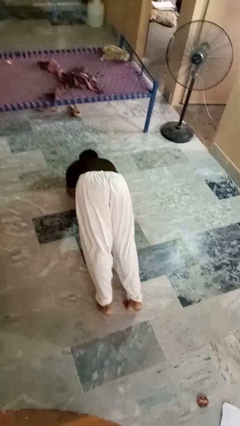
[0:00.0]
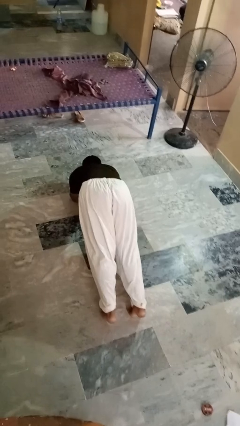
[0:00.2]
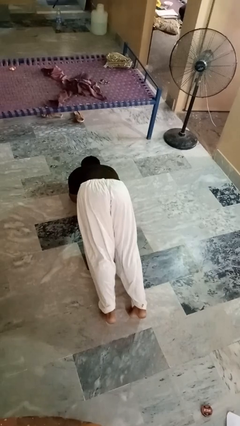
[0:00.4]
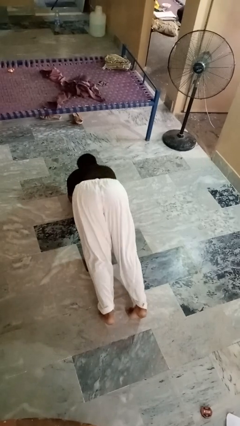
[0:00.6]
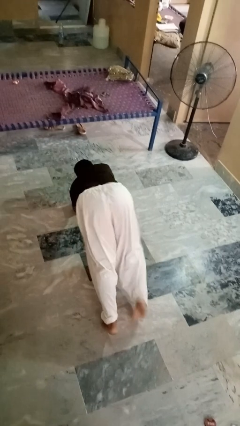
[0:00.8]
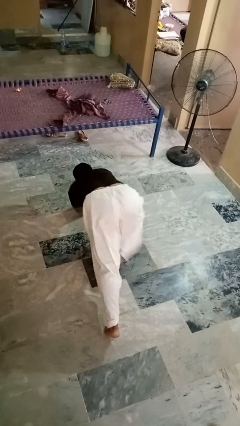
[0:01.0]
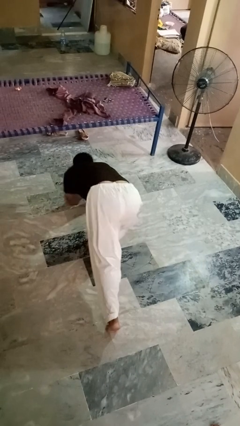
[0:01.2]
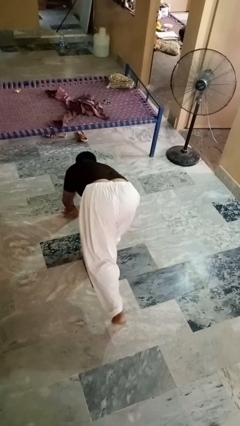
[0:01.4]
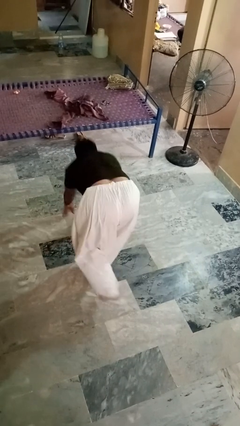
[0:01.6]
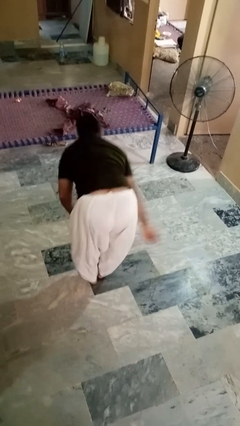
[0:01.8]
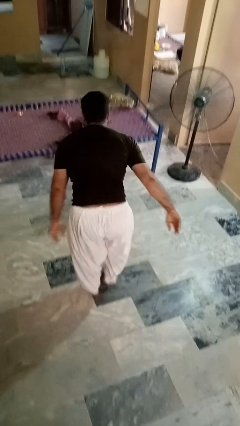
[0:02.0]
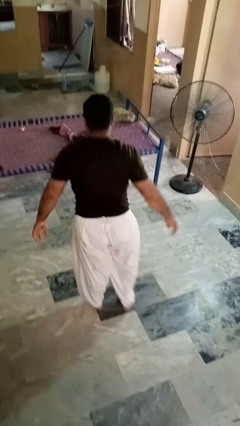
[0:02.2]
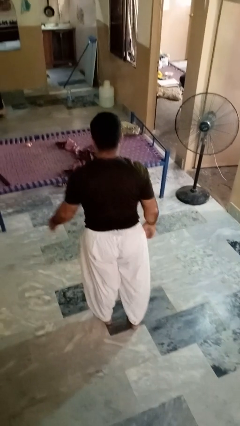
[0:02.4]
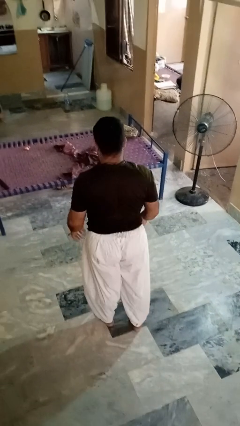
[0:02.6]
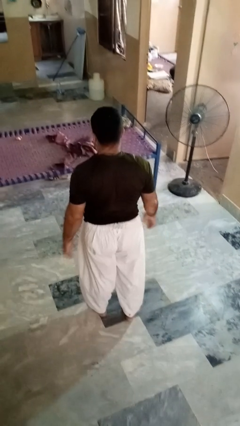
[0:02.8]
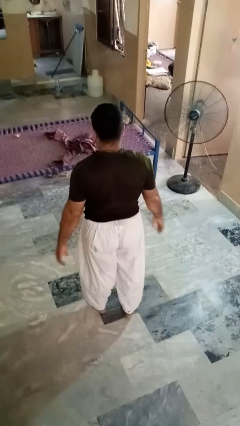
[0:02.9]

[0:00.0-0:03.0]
person stands up from floor

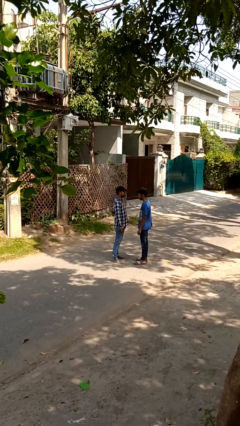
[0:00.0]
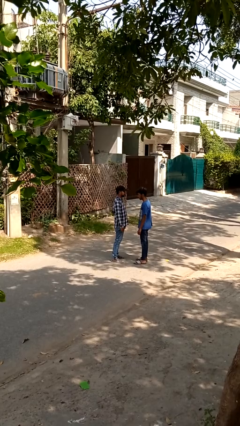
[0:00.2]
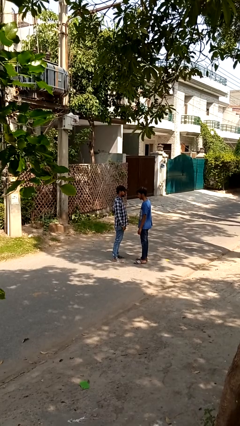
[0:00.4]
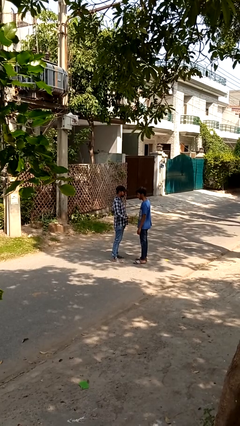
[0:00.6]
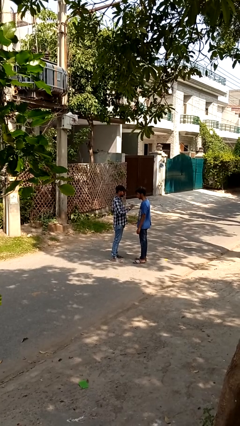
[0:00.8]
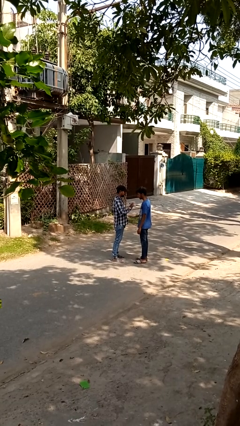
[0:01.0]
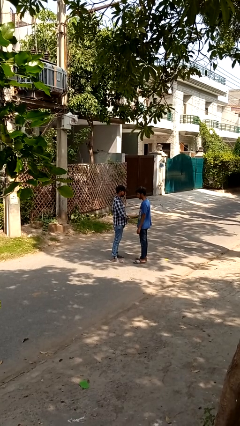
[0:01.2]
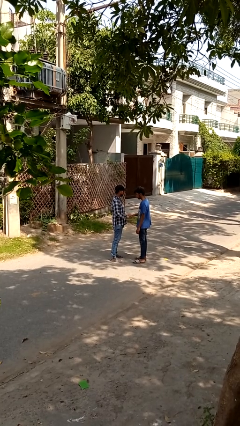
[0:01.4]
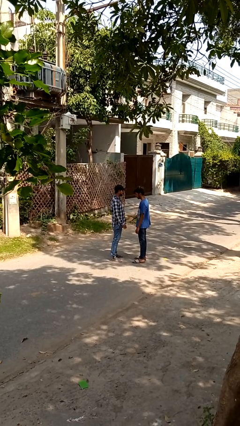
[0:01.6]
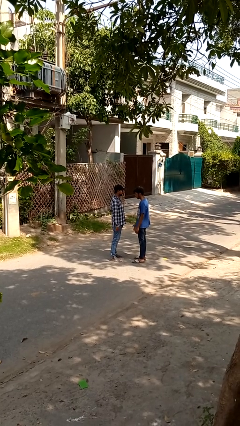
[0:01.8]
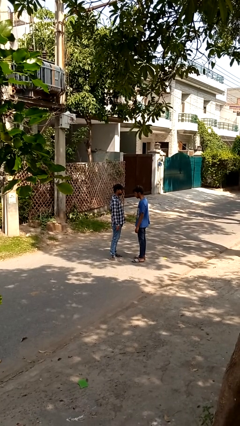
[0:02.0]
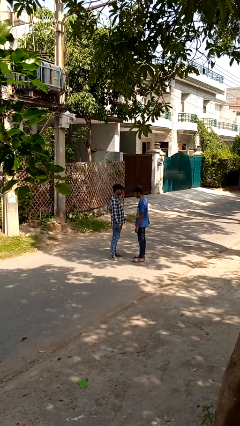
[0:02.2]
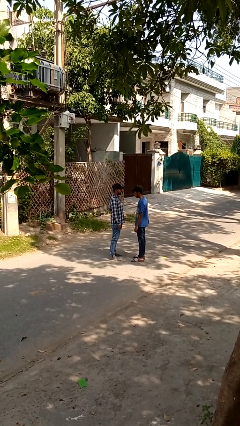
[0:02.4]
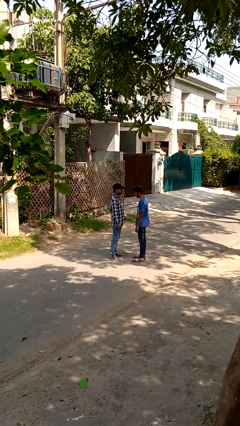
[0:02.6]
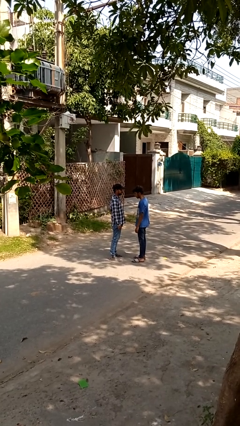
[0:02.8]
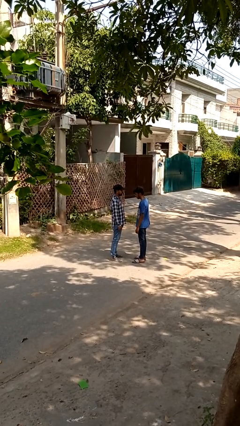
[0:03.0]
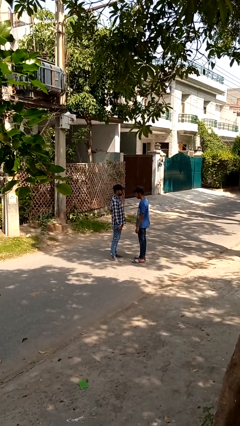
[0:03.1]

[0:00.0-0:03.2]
person highfives hand

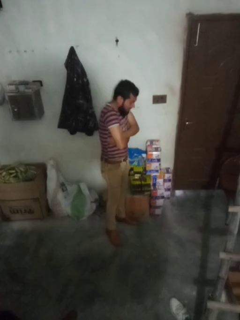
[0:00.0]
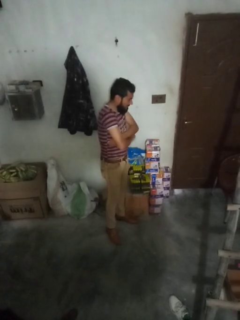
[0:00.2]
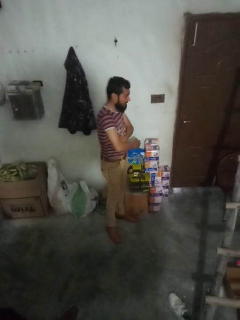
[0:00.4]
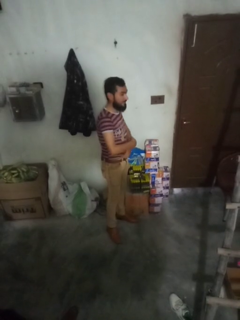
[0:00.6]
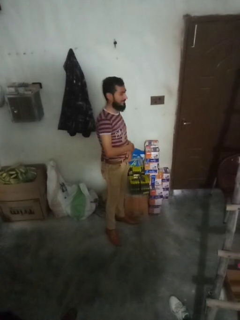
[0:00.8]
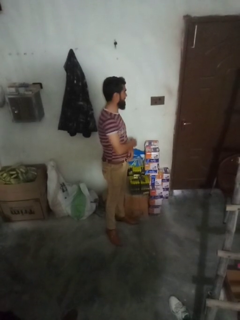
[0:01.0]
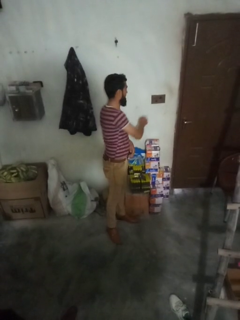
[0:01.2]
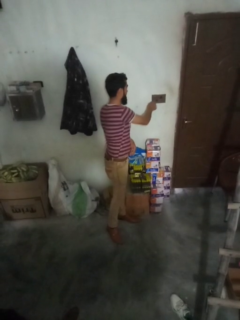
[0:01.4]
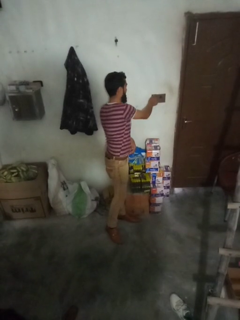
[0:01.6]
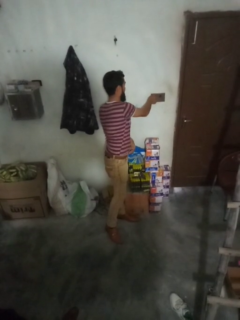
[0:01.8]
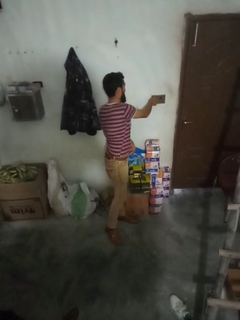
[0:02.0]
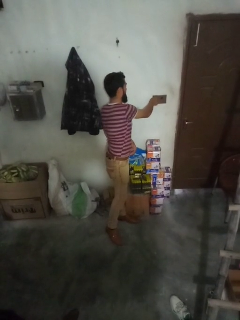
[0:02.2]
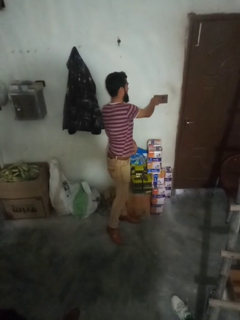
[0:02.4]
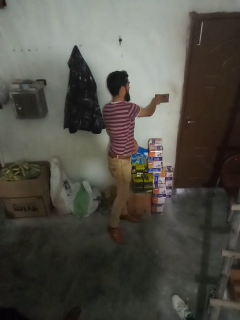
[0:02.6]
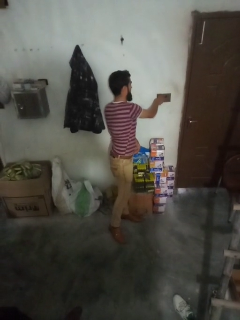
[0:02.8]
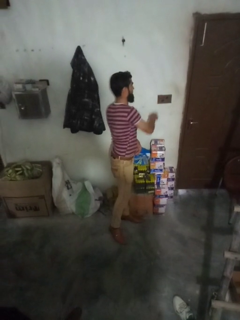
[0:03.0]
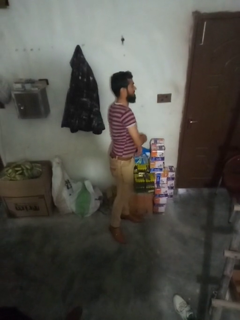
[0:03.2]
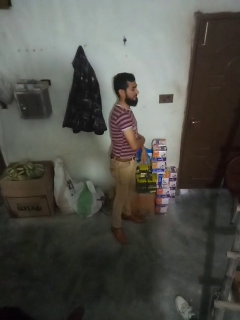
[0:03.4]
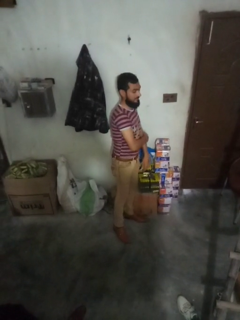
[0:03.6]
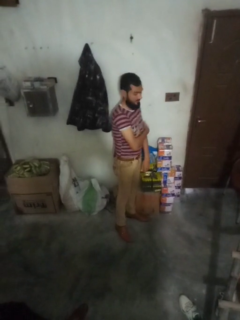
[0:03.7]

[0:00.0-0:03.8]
person adjusts thermostat

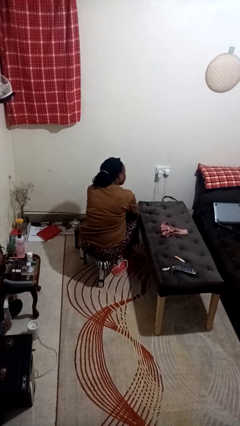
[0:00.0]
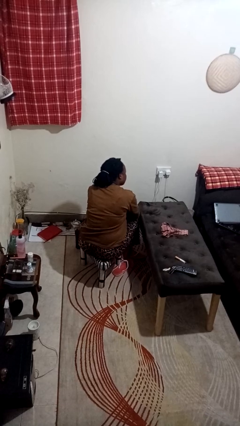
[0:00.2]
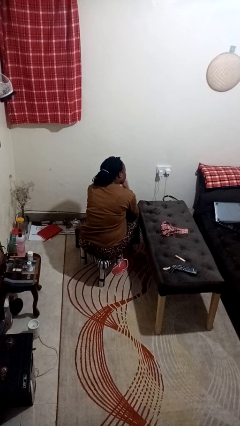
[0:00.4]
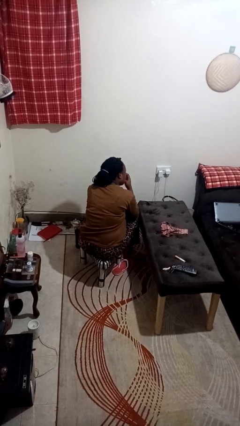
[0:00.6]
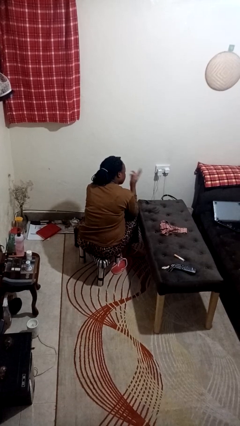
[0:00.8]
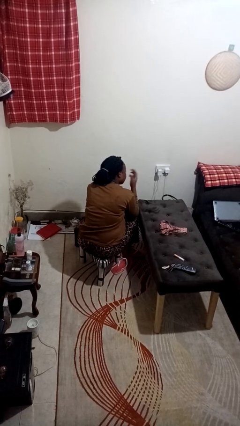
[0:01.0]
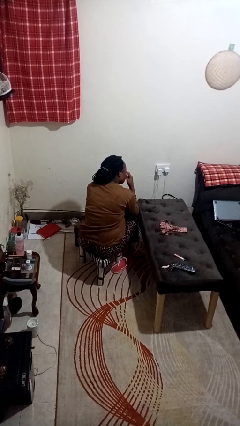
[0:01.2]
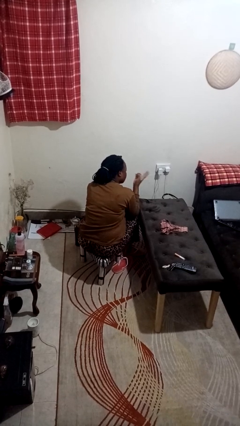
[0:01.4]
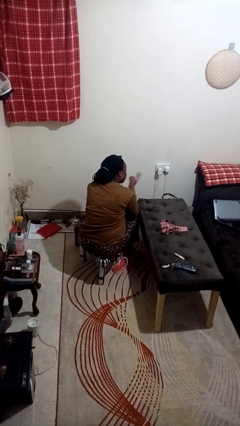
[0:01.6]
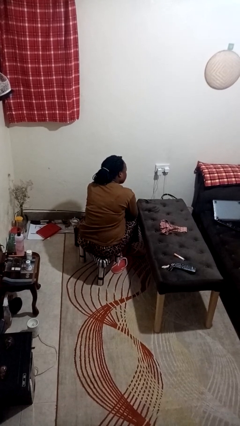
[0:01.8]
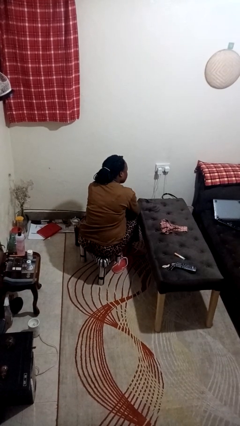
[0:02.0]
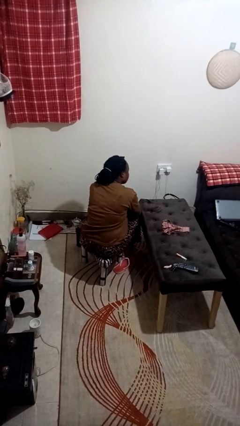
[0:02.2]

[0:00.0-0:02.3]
person gestures watch closely

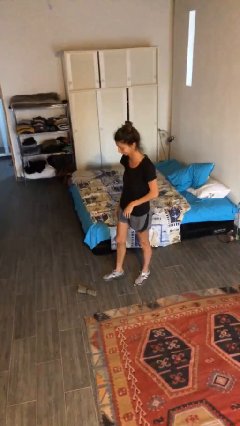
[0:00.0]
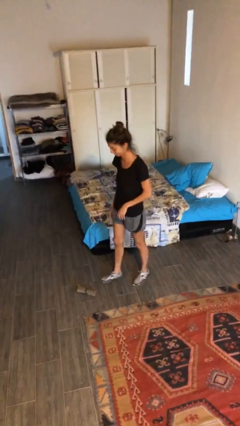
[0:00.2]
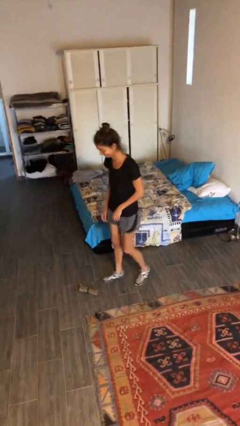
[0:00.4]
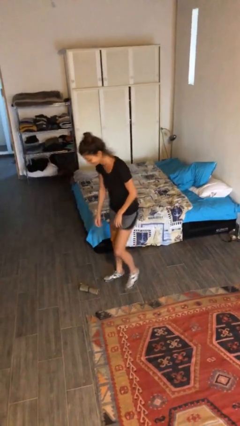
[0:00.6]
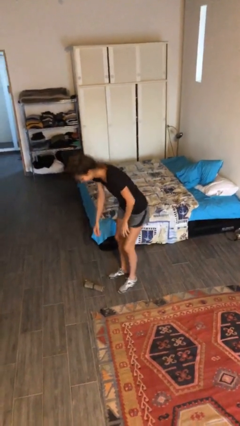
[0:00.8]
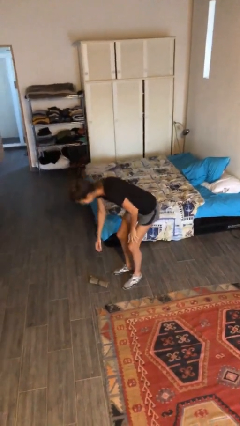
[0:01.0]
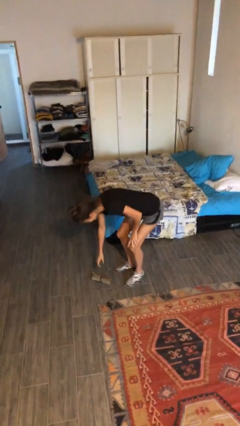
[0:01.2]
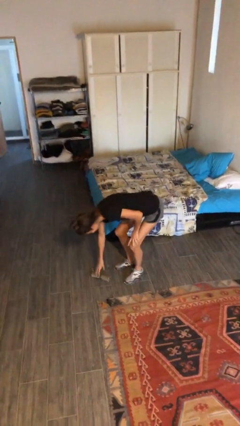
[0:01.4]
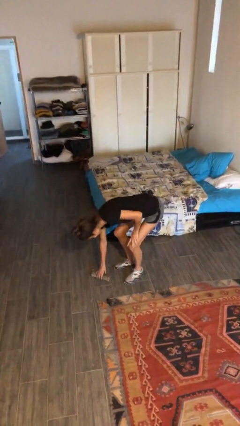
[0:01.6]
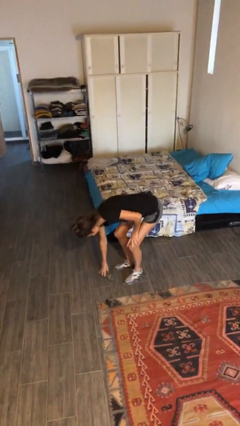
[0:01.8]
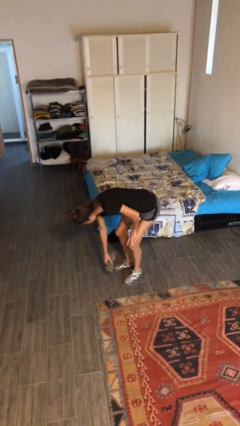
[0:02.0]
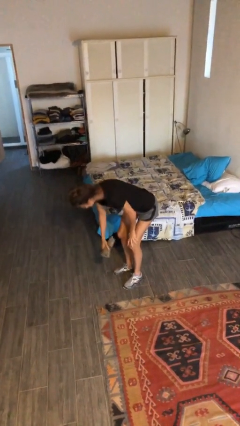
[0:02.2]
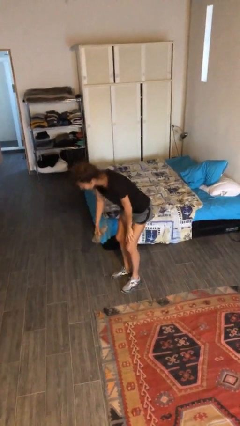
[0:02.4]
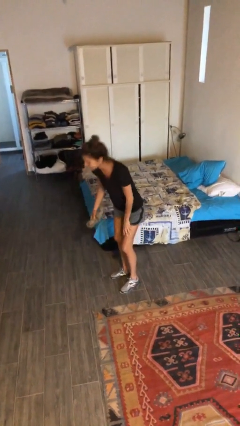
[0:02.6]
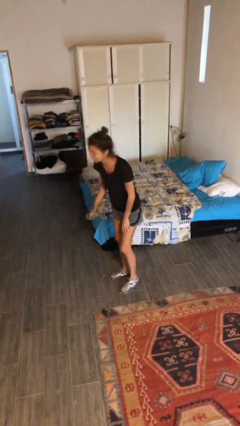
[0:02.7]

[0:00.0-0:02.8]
person picks up object from floor

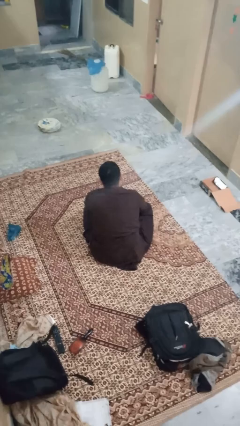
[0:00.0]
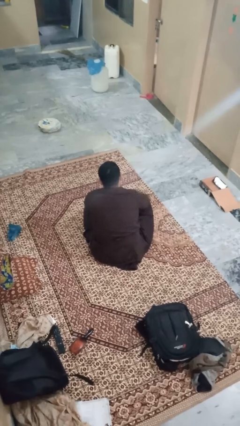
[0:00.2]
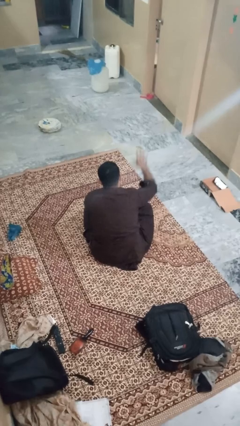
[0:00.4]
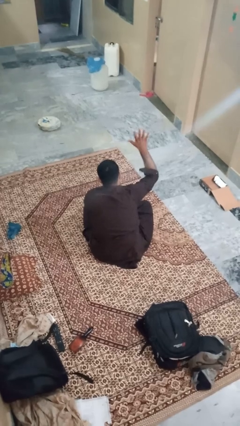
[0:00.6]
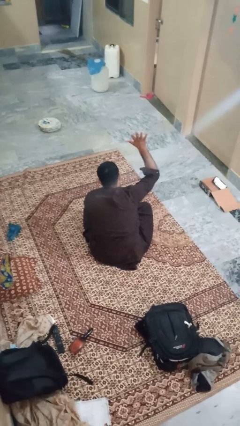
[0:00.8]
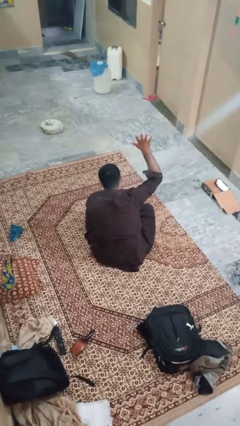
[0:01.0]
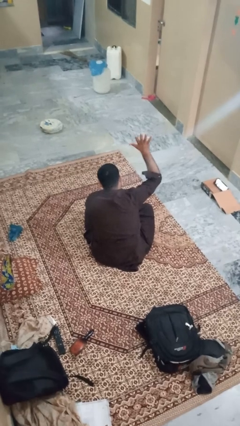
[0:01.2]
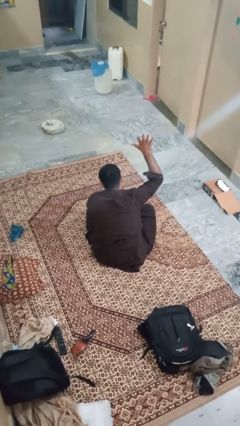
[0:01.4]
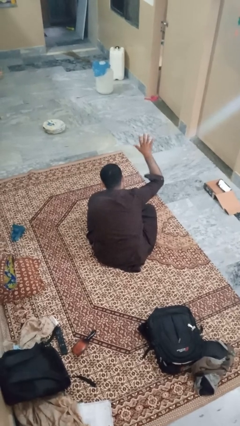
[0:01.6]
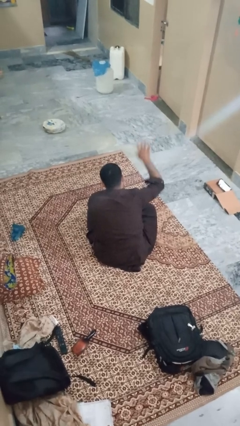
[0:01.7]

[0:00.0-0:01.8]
person gestures number five

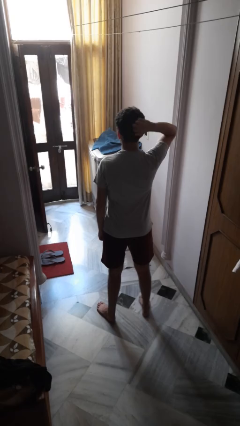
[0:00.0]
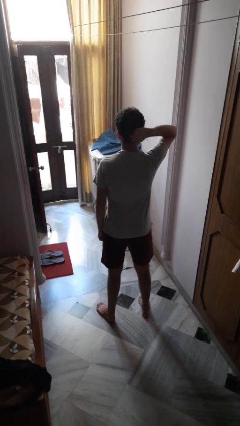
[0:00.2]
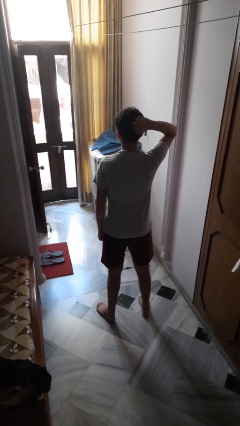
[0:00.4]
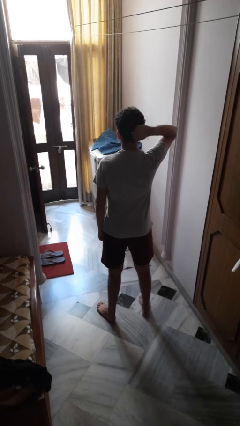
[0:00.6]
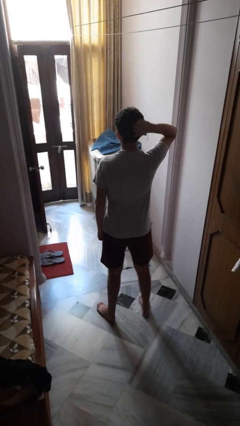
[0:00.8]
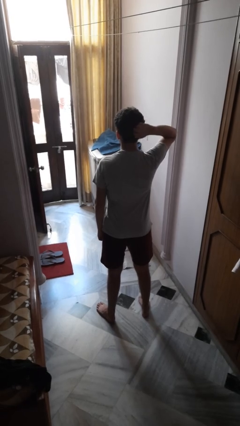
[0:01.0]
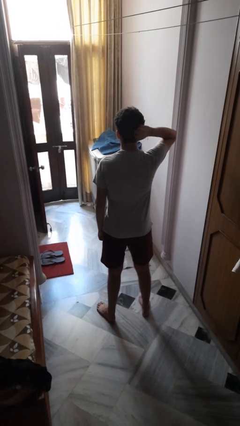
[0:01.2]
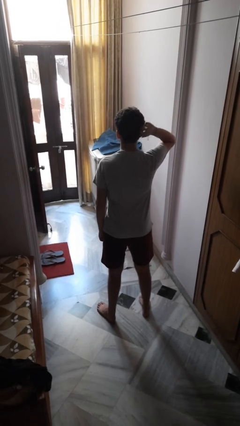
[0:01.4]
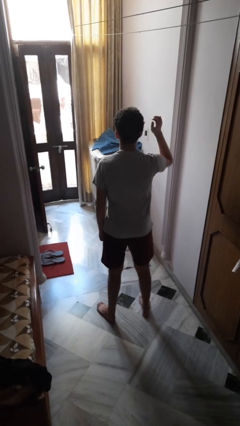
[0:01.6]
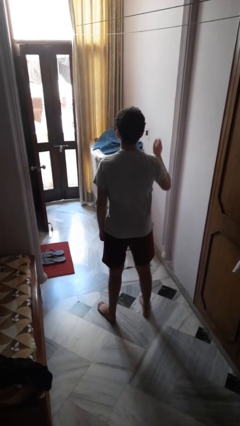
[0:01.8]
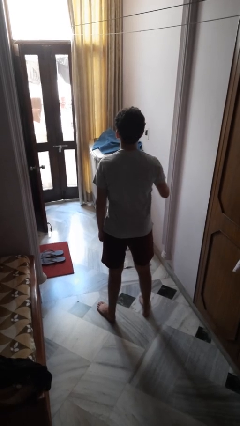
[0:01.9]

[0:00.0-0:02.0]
person scratches face
